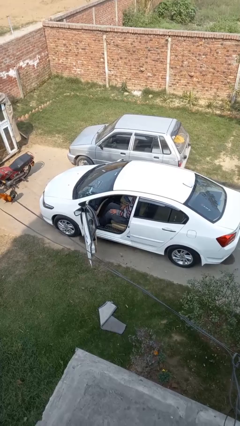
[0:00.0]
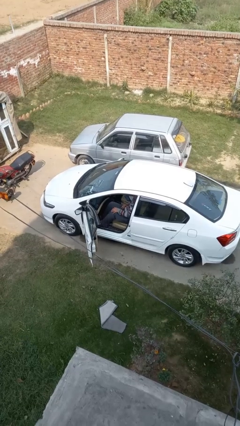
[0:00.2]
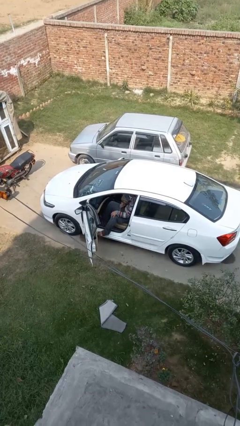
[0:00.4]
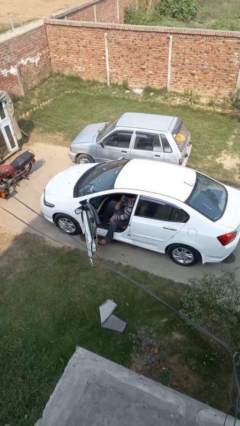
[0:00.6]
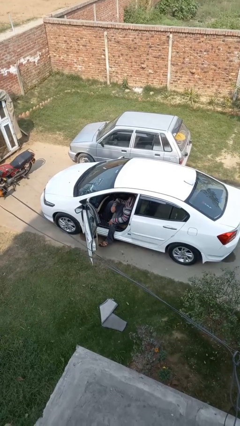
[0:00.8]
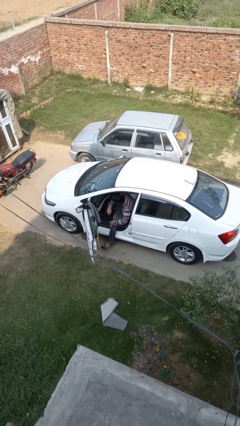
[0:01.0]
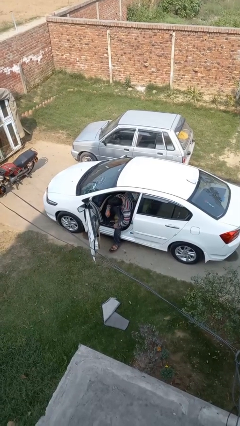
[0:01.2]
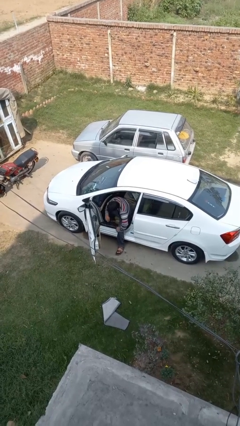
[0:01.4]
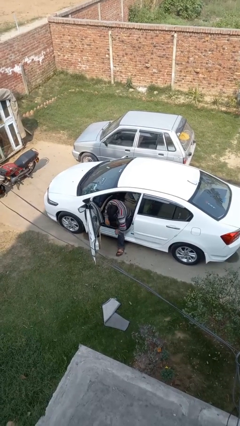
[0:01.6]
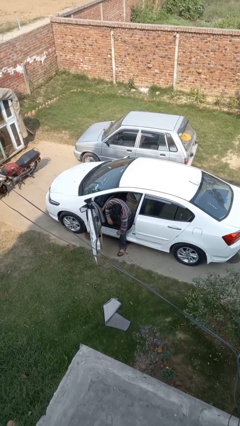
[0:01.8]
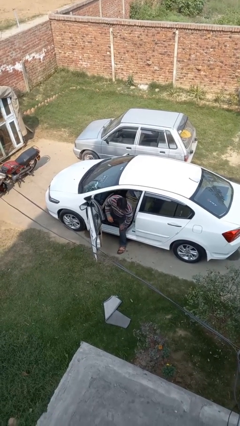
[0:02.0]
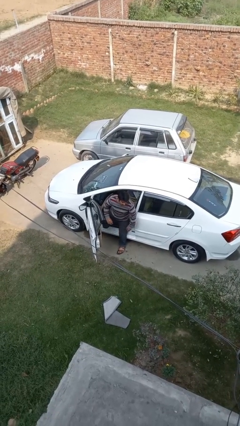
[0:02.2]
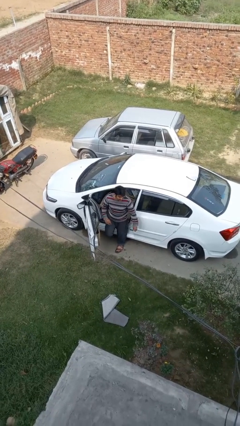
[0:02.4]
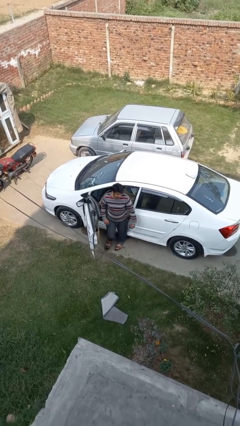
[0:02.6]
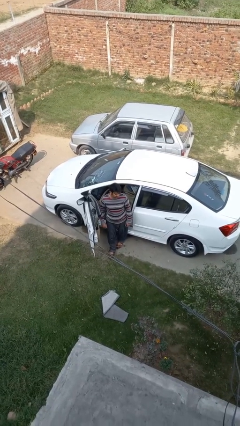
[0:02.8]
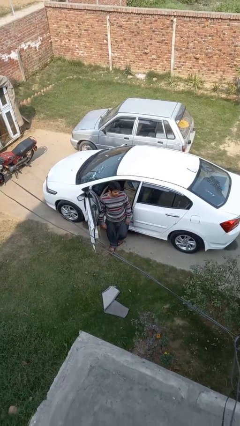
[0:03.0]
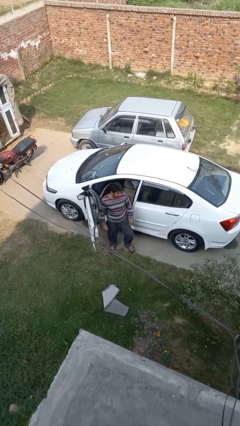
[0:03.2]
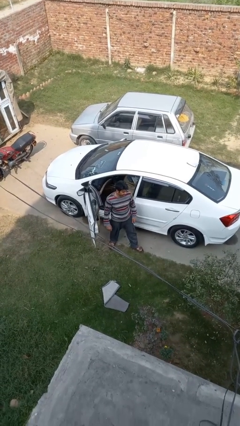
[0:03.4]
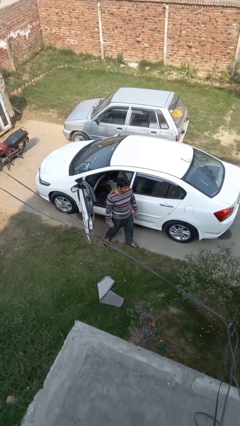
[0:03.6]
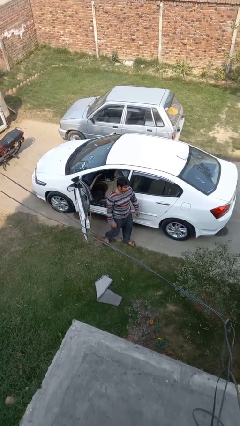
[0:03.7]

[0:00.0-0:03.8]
person exits car

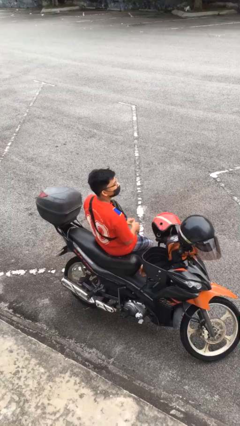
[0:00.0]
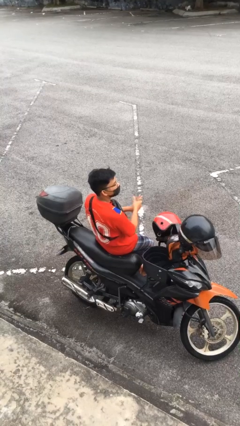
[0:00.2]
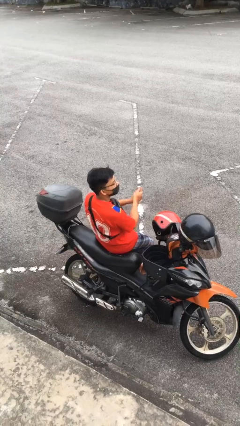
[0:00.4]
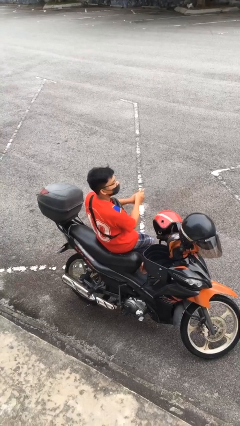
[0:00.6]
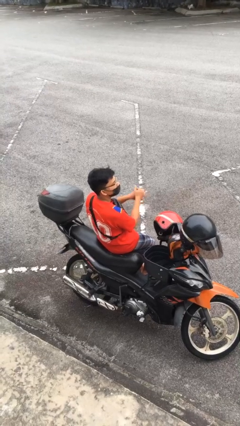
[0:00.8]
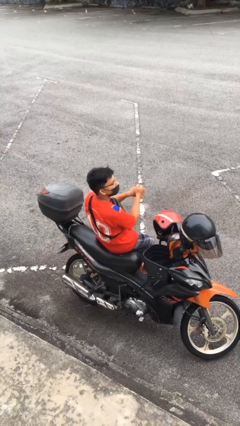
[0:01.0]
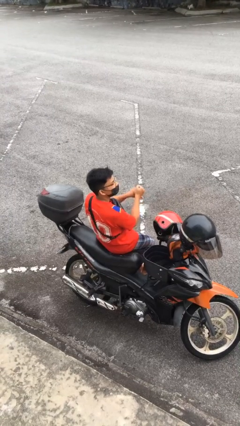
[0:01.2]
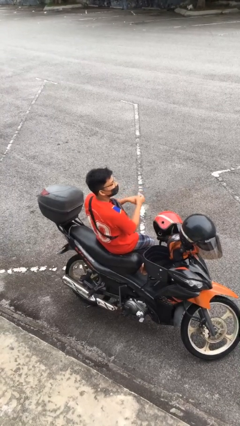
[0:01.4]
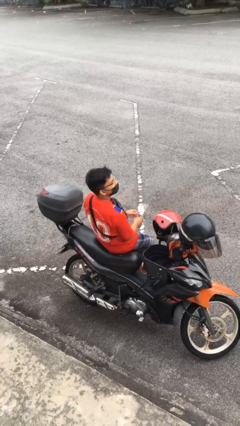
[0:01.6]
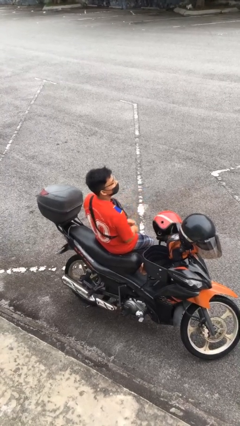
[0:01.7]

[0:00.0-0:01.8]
person cracks knuckles

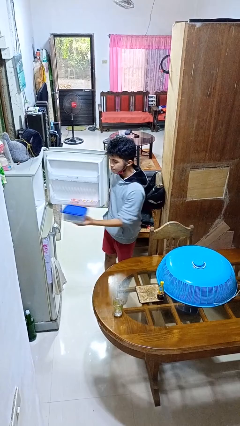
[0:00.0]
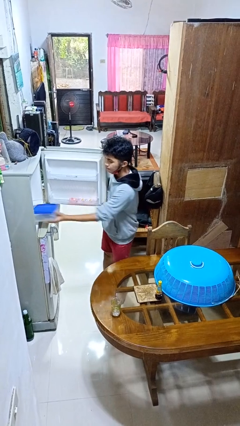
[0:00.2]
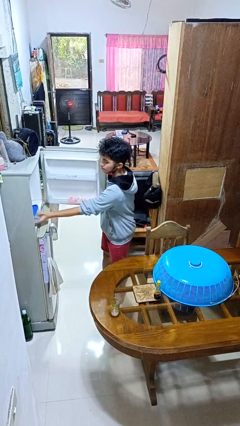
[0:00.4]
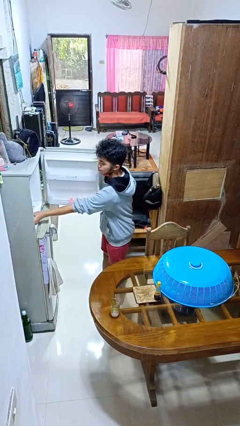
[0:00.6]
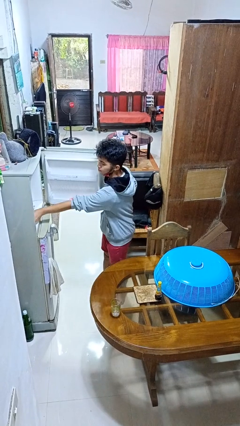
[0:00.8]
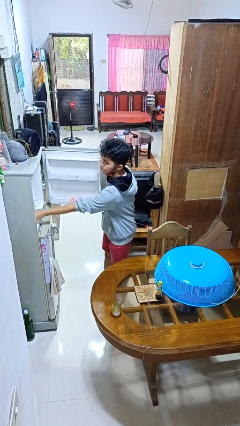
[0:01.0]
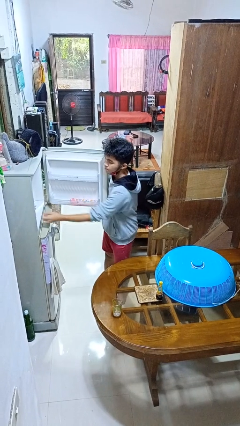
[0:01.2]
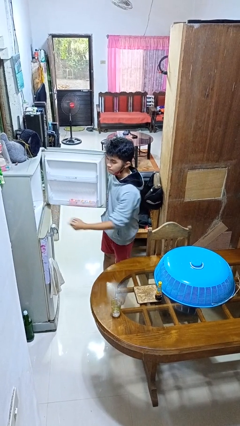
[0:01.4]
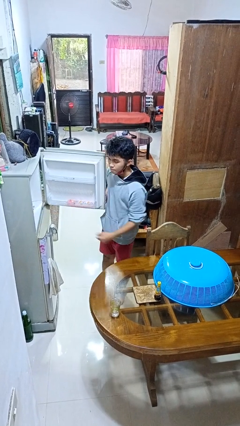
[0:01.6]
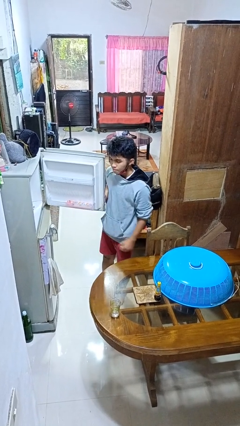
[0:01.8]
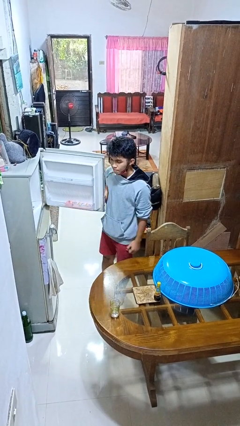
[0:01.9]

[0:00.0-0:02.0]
person puts object into refrigerator

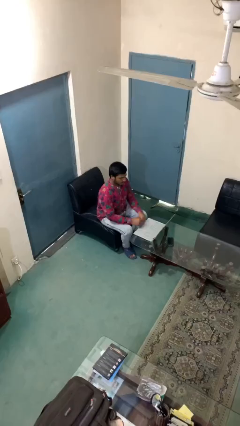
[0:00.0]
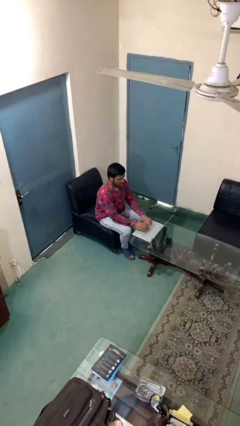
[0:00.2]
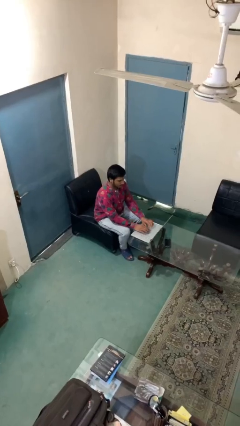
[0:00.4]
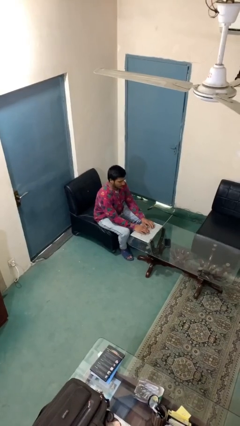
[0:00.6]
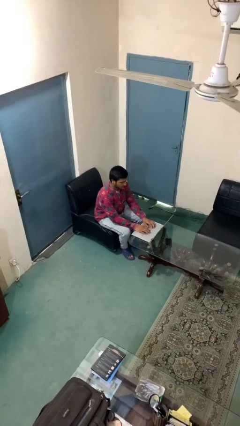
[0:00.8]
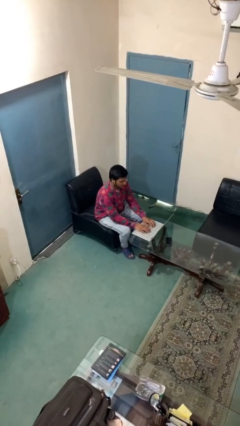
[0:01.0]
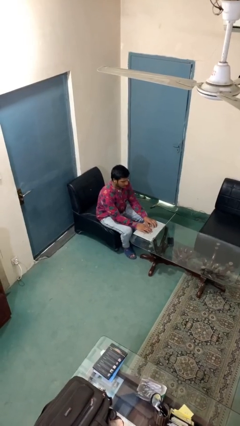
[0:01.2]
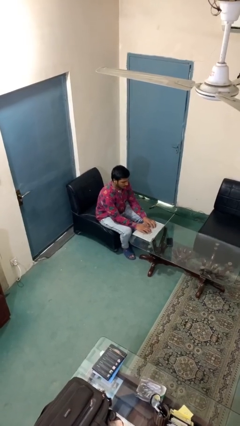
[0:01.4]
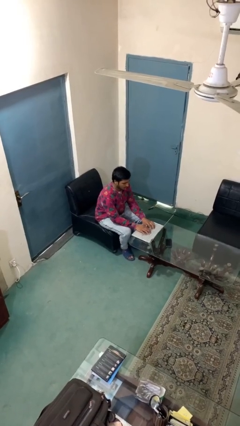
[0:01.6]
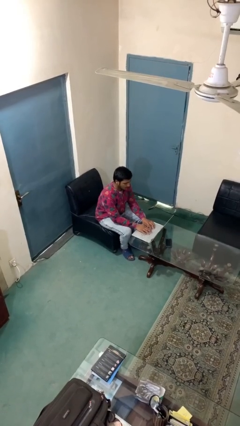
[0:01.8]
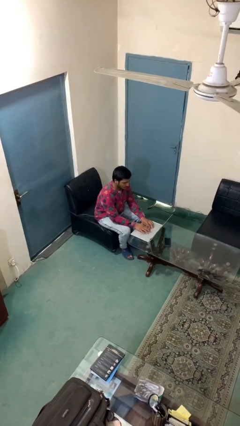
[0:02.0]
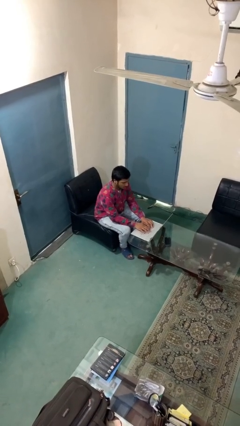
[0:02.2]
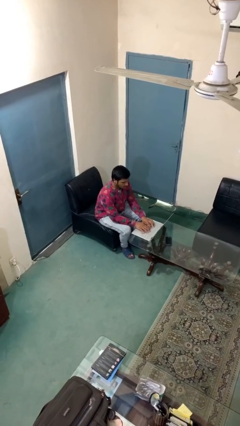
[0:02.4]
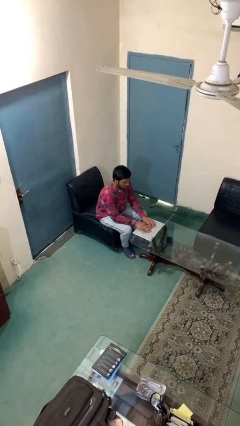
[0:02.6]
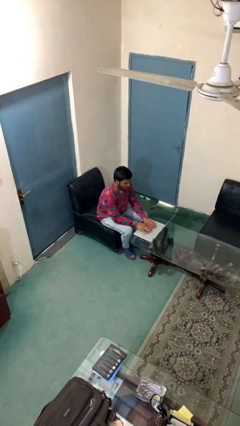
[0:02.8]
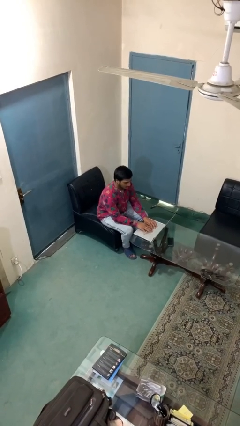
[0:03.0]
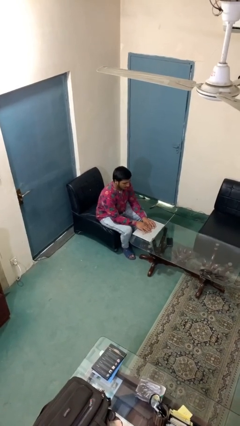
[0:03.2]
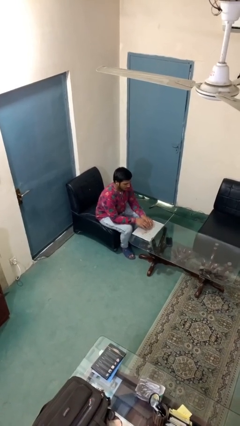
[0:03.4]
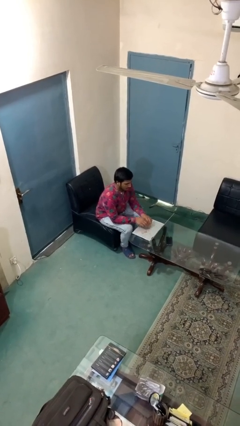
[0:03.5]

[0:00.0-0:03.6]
person interacts with laptop

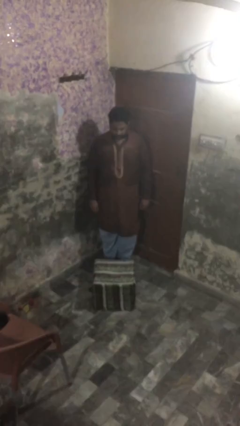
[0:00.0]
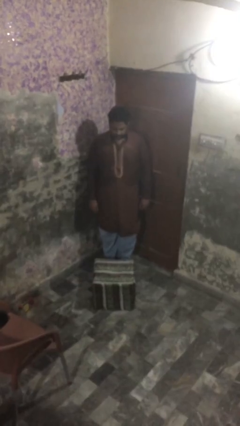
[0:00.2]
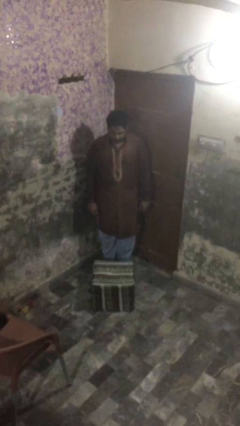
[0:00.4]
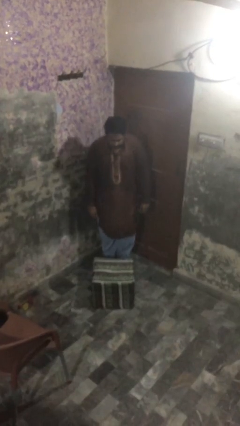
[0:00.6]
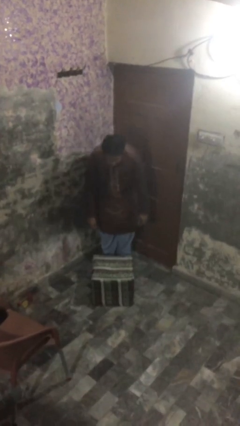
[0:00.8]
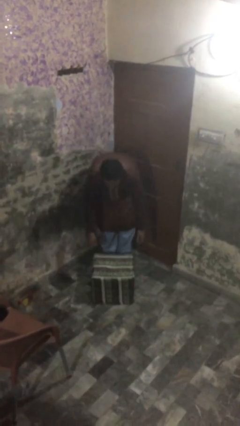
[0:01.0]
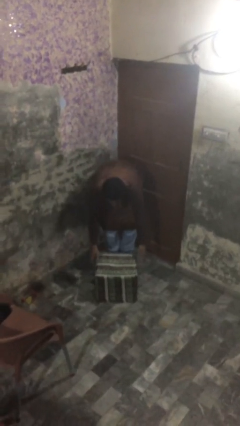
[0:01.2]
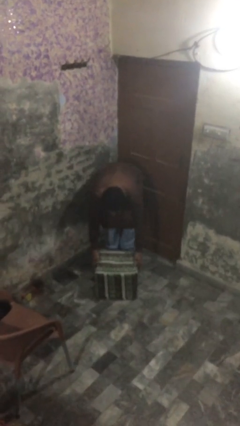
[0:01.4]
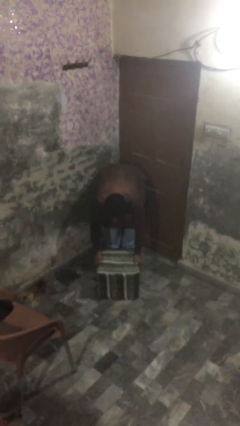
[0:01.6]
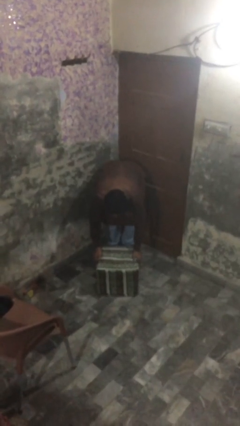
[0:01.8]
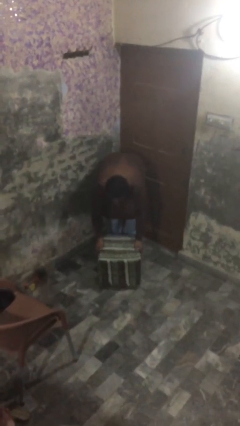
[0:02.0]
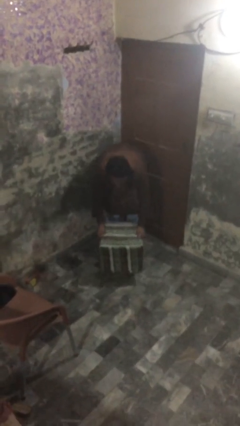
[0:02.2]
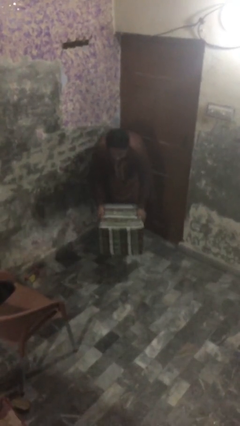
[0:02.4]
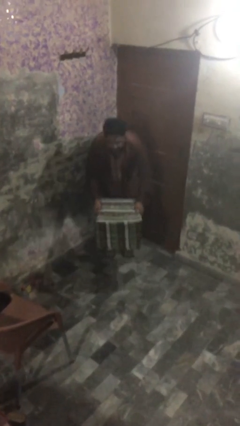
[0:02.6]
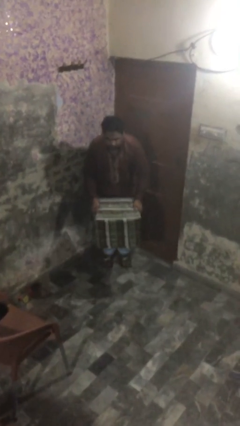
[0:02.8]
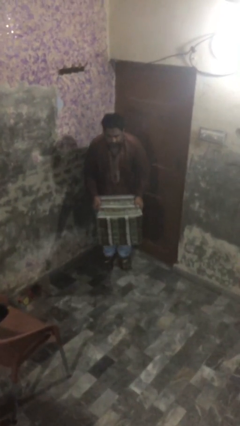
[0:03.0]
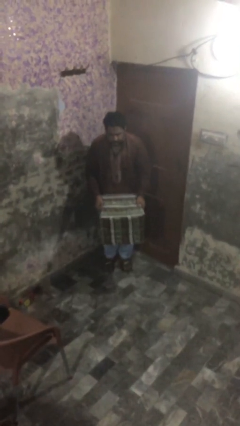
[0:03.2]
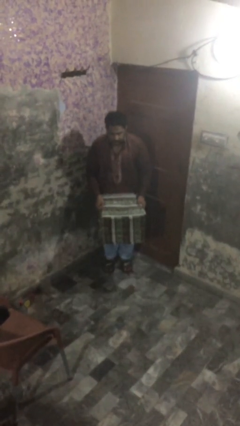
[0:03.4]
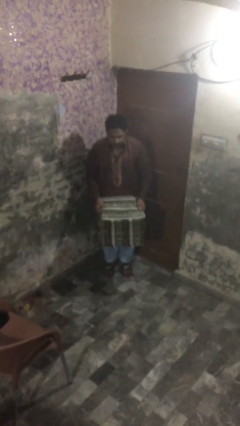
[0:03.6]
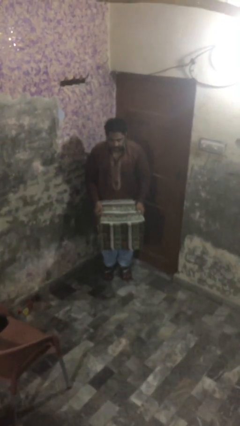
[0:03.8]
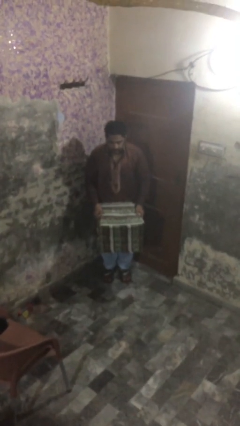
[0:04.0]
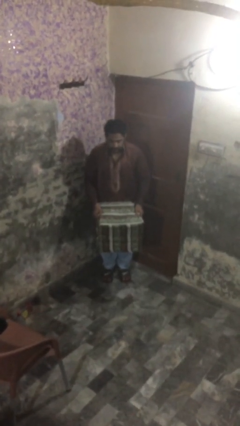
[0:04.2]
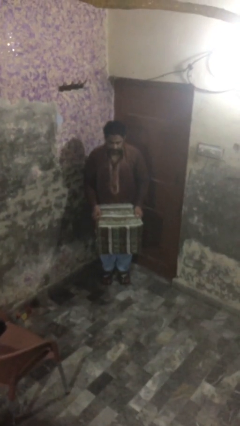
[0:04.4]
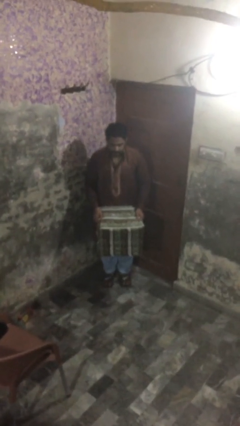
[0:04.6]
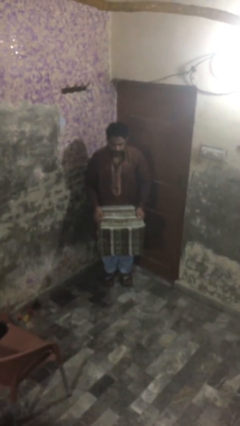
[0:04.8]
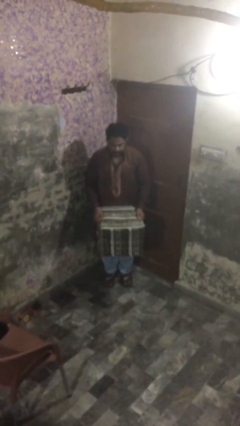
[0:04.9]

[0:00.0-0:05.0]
person picks up object from floor

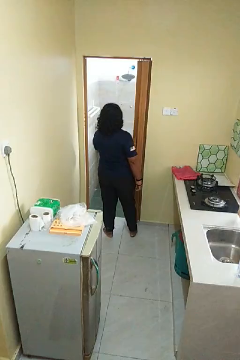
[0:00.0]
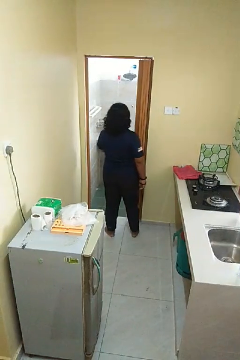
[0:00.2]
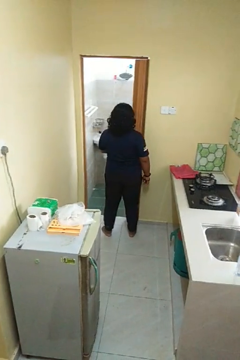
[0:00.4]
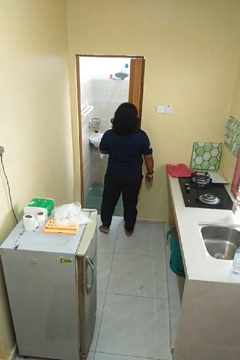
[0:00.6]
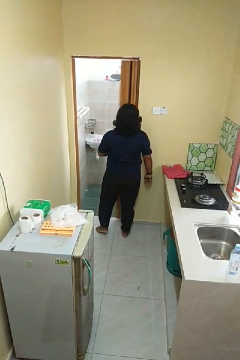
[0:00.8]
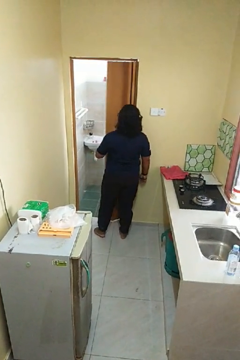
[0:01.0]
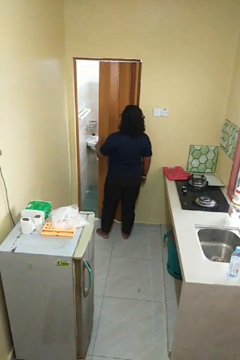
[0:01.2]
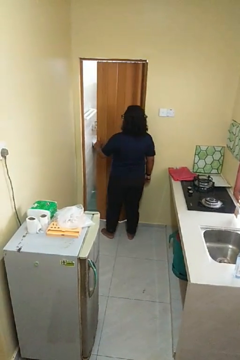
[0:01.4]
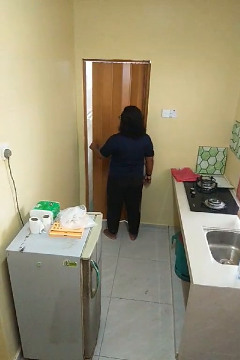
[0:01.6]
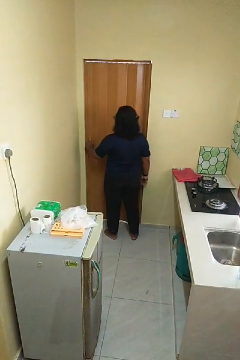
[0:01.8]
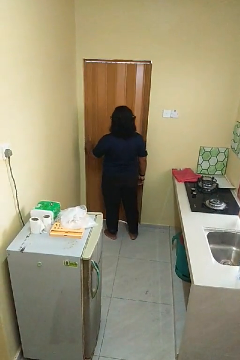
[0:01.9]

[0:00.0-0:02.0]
person closes sliding door
